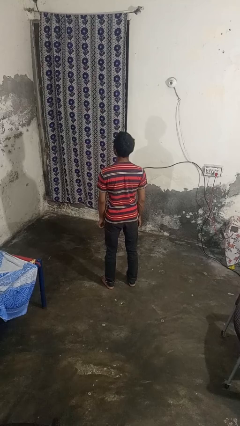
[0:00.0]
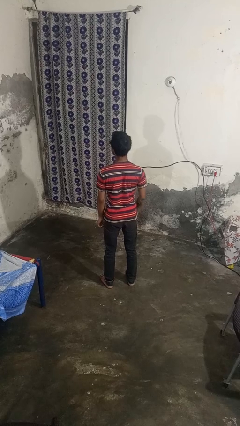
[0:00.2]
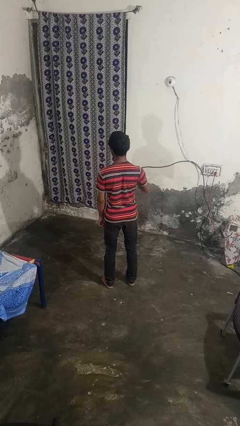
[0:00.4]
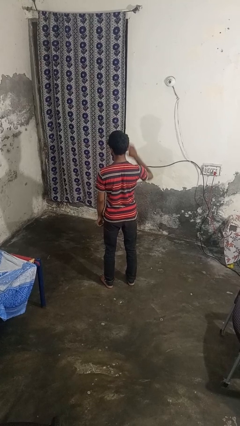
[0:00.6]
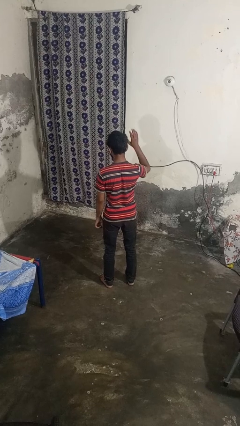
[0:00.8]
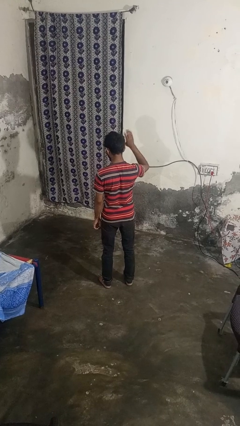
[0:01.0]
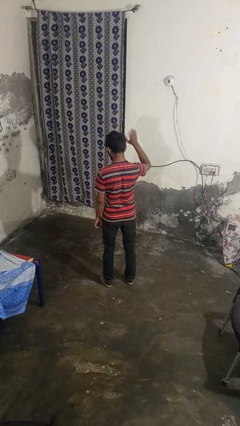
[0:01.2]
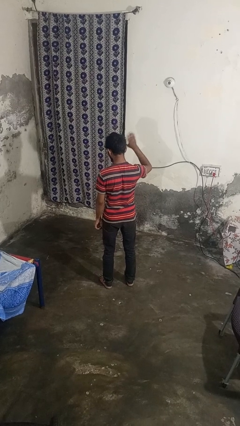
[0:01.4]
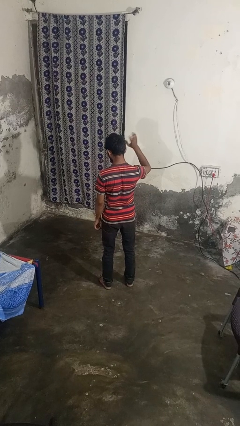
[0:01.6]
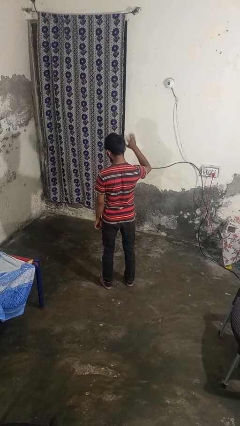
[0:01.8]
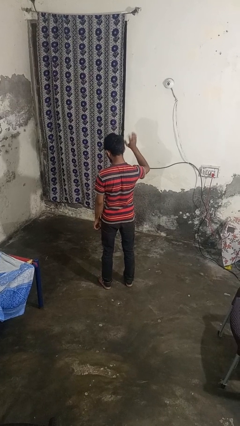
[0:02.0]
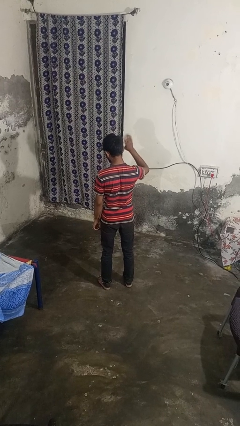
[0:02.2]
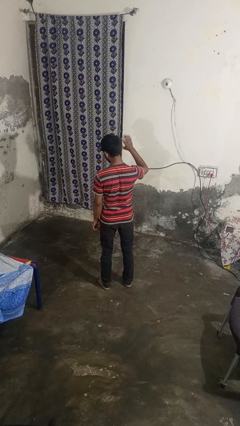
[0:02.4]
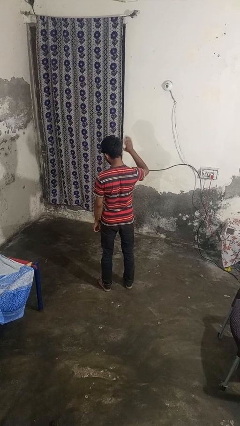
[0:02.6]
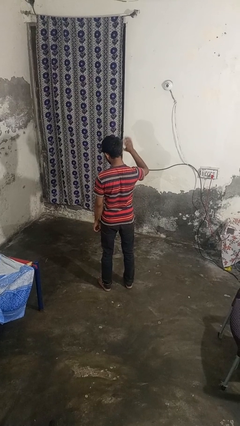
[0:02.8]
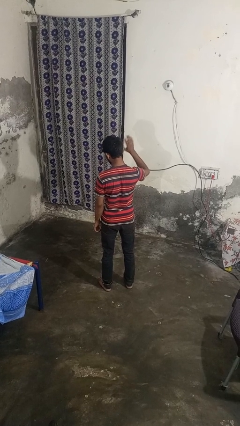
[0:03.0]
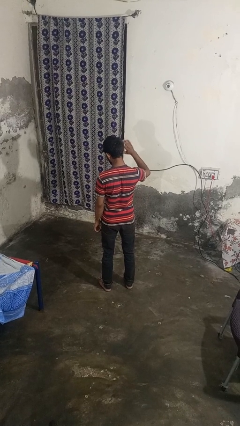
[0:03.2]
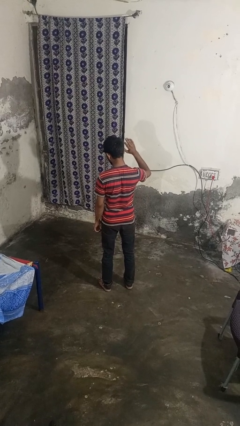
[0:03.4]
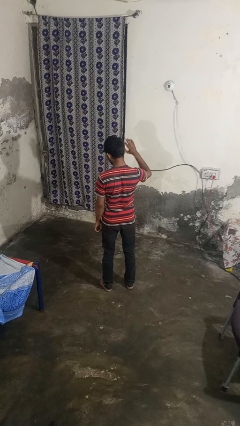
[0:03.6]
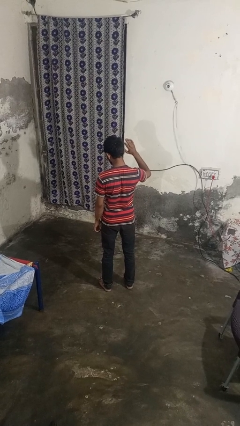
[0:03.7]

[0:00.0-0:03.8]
person waves at person

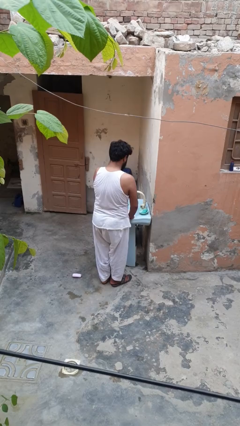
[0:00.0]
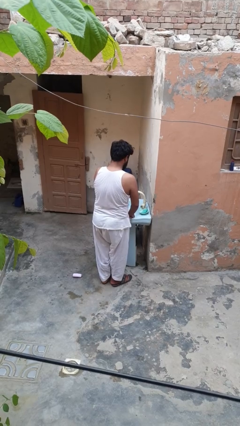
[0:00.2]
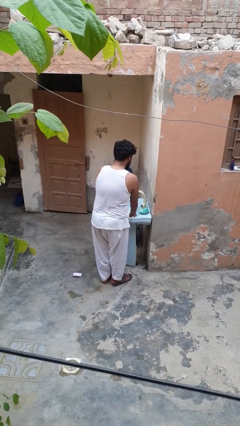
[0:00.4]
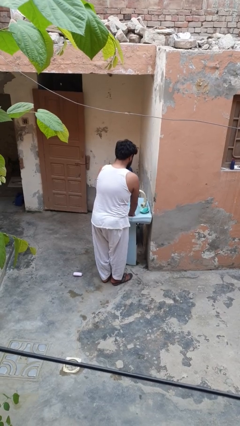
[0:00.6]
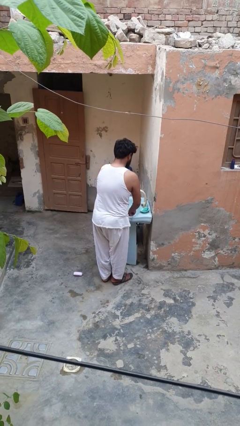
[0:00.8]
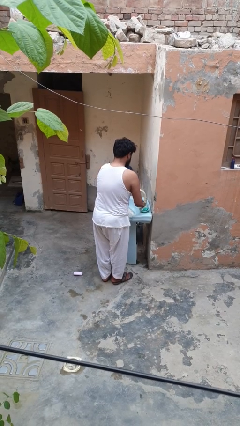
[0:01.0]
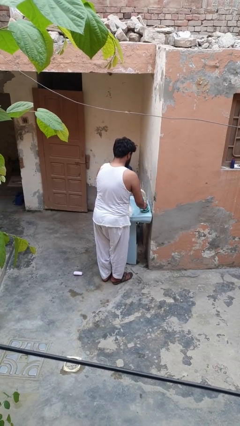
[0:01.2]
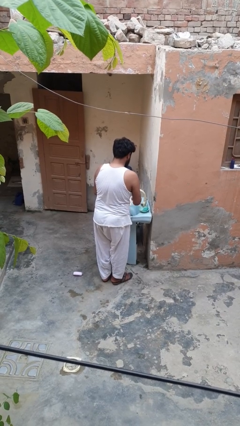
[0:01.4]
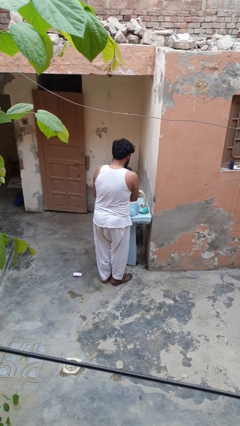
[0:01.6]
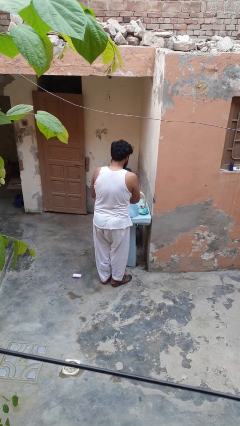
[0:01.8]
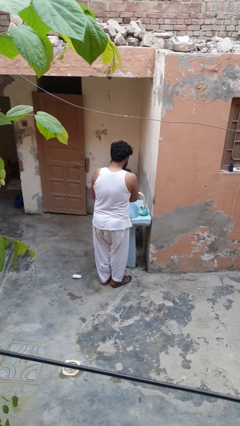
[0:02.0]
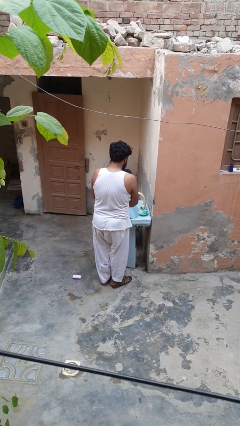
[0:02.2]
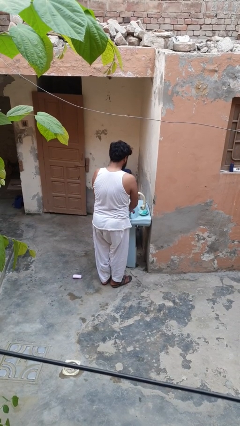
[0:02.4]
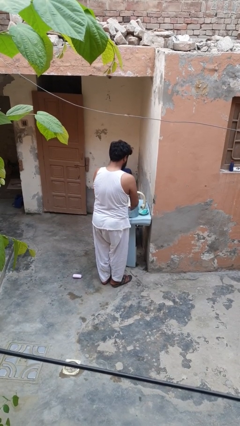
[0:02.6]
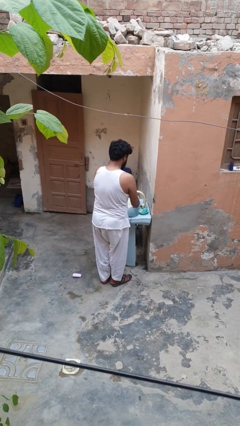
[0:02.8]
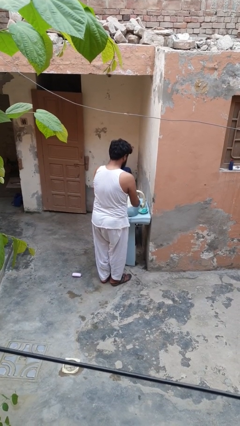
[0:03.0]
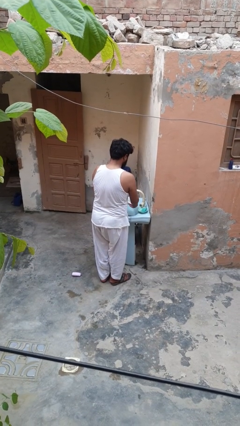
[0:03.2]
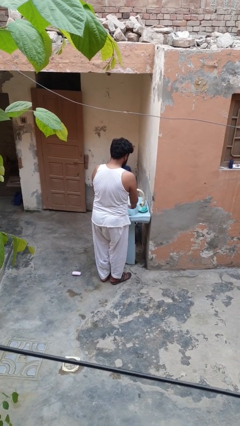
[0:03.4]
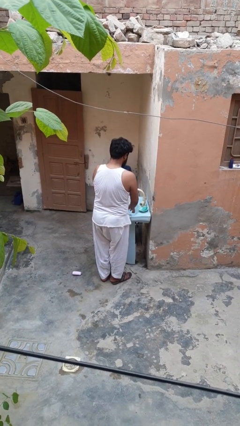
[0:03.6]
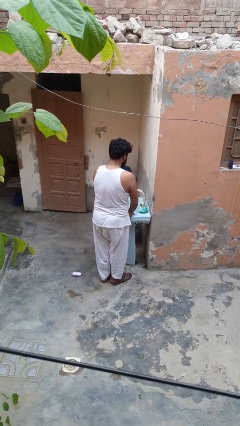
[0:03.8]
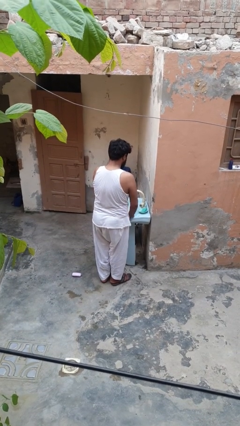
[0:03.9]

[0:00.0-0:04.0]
person washes dish

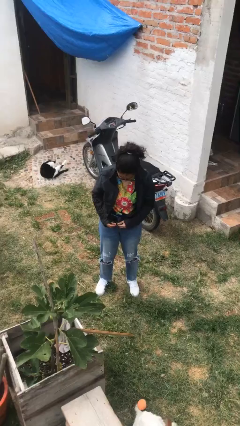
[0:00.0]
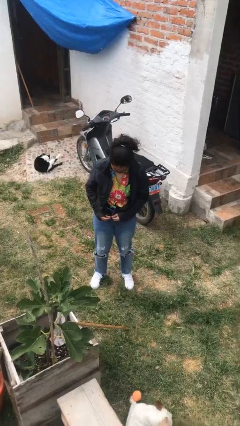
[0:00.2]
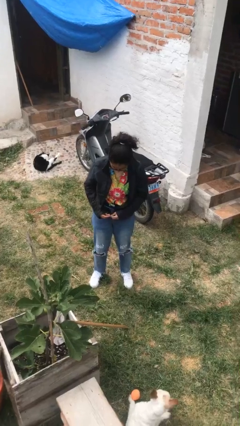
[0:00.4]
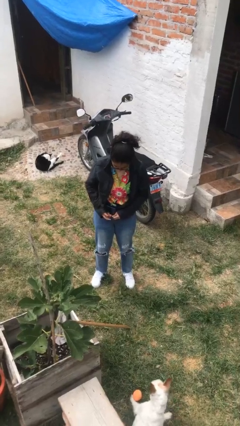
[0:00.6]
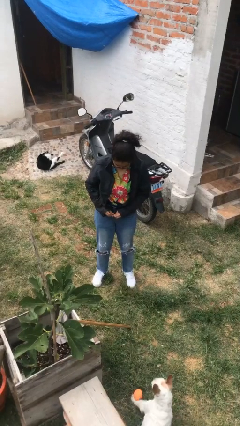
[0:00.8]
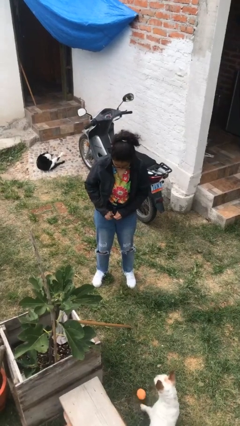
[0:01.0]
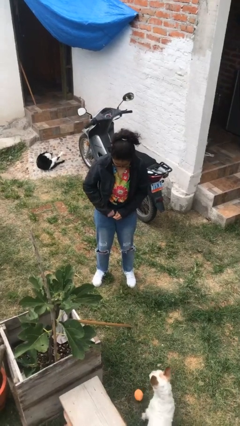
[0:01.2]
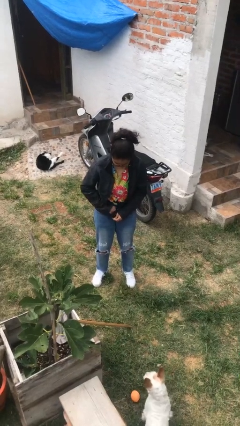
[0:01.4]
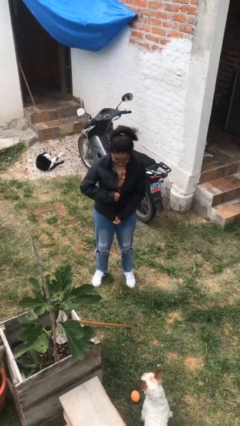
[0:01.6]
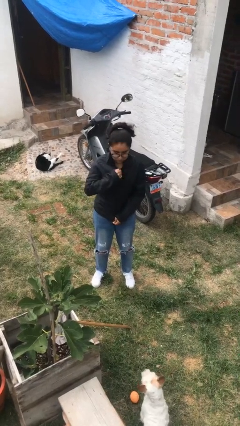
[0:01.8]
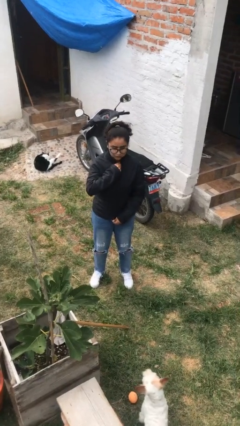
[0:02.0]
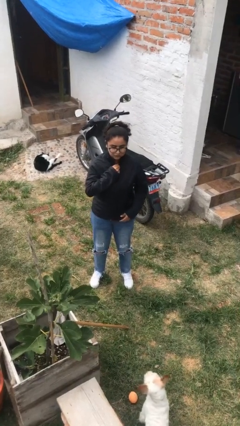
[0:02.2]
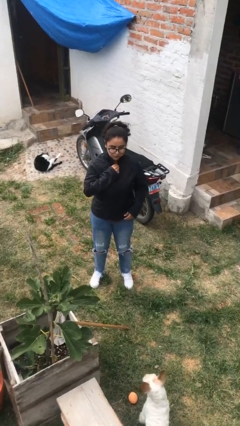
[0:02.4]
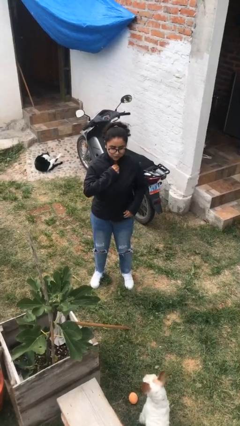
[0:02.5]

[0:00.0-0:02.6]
person zips up jacket

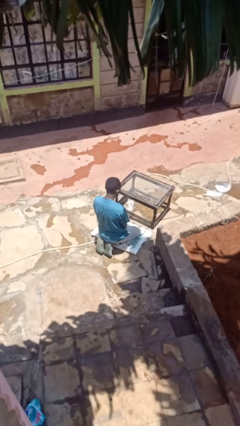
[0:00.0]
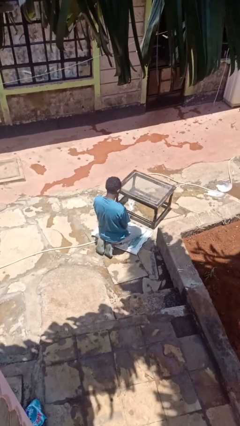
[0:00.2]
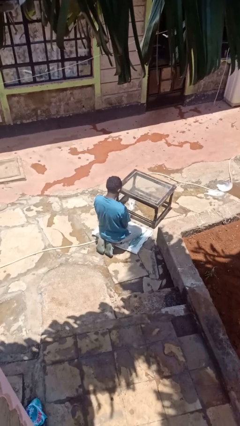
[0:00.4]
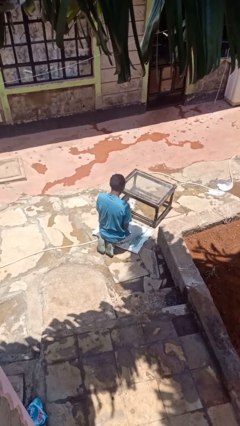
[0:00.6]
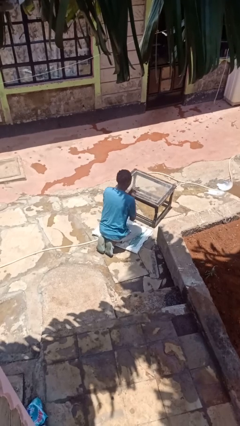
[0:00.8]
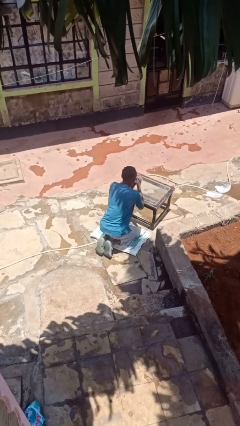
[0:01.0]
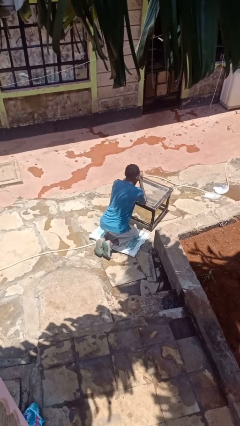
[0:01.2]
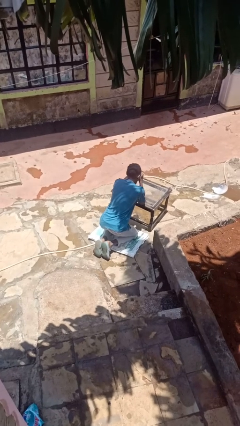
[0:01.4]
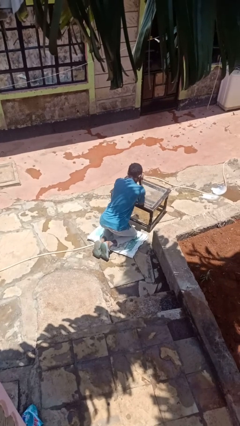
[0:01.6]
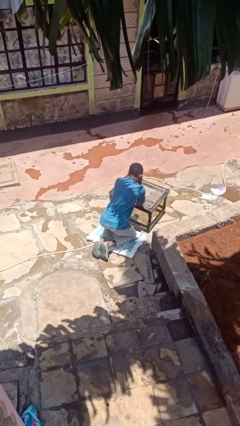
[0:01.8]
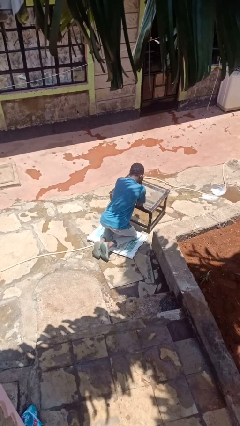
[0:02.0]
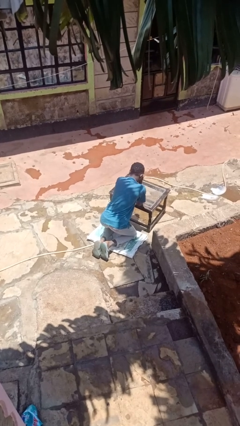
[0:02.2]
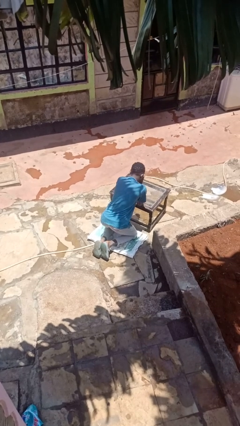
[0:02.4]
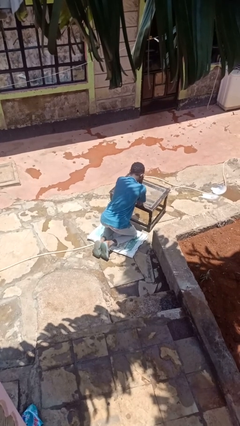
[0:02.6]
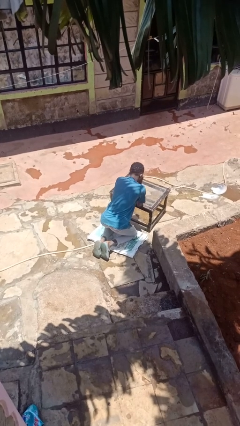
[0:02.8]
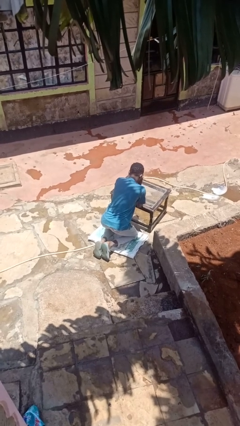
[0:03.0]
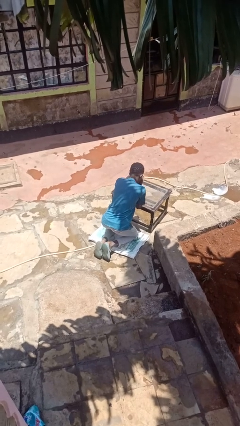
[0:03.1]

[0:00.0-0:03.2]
person prays

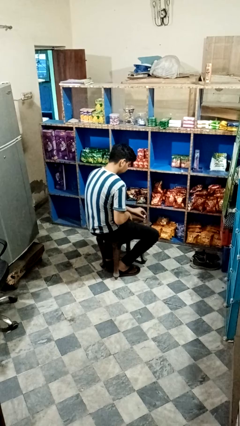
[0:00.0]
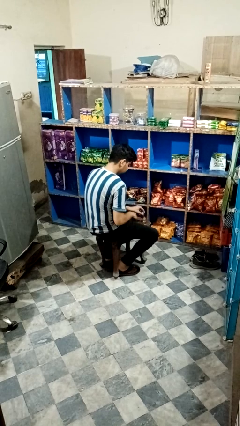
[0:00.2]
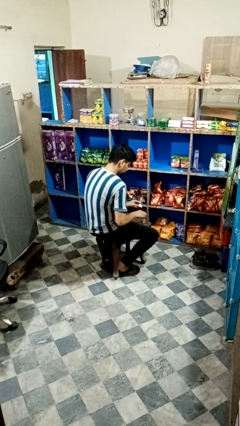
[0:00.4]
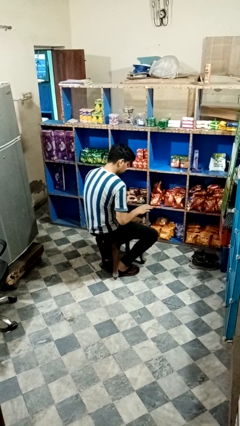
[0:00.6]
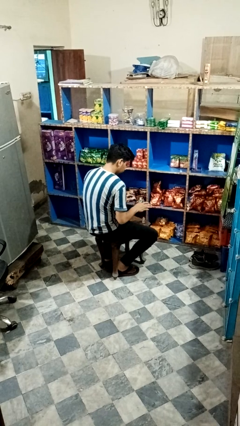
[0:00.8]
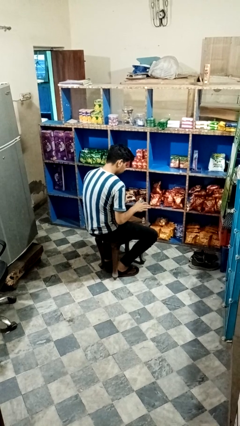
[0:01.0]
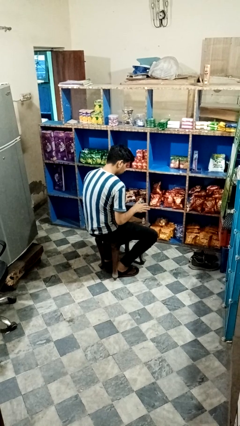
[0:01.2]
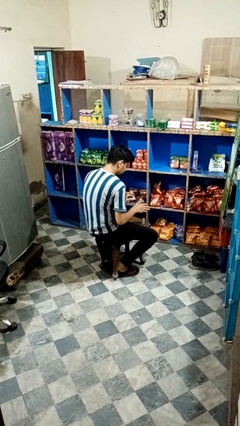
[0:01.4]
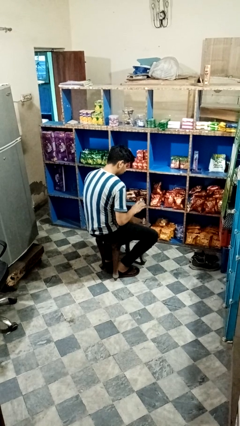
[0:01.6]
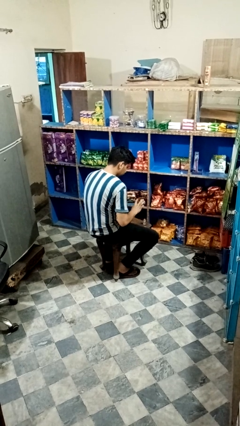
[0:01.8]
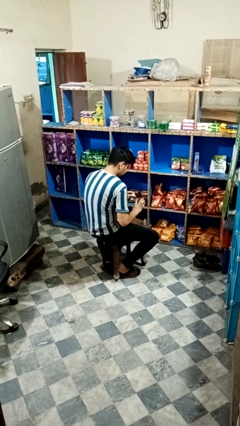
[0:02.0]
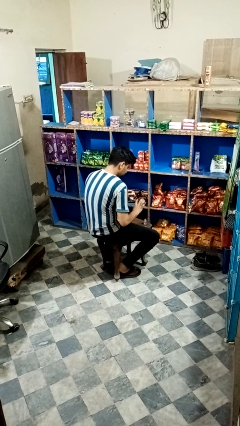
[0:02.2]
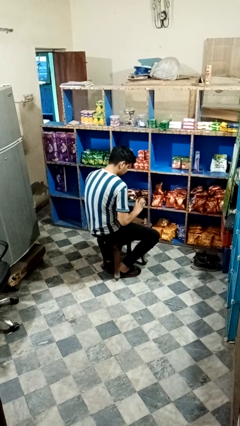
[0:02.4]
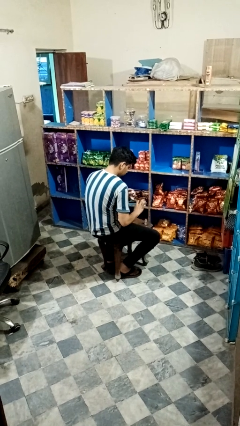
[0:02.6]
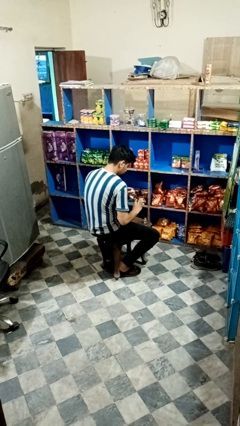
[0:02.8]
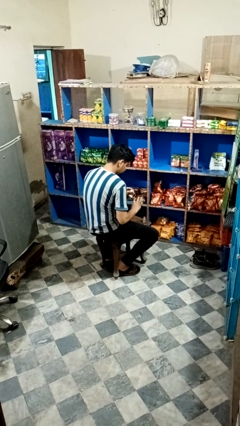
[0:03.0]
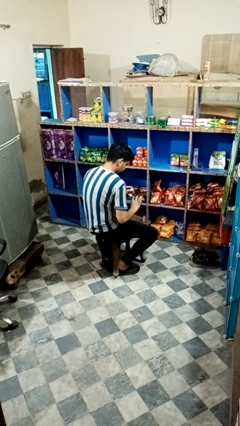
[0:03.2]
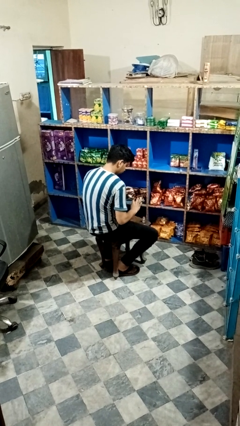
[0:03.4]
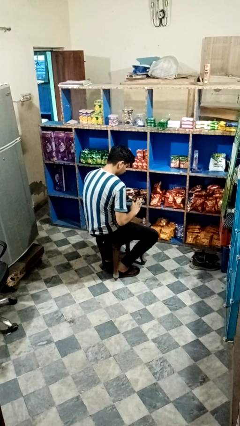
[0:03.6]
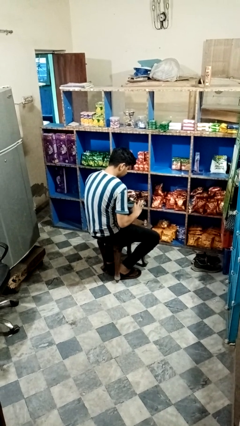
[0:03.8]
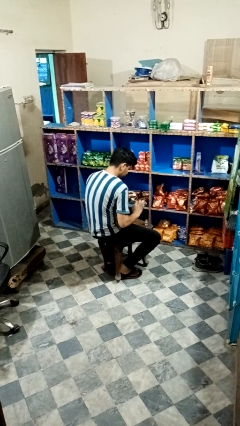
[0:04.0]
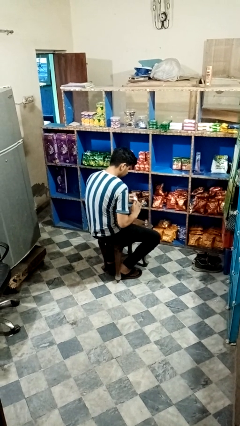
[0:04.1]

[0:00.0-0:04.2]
person paints fingernails
